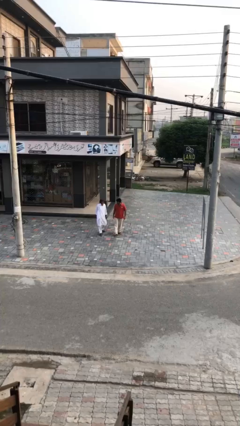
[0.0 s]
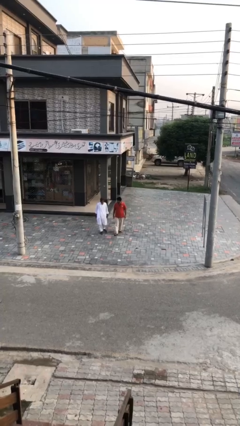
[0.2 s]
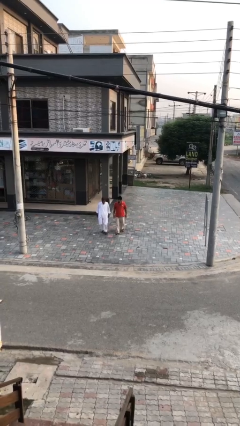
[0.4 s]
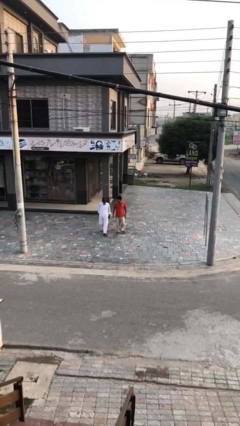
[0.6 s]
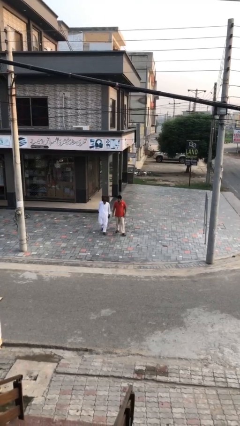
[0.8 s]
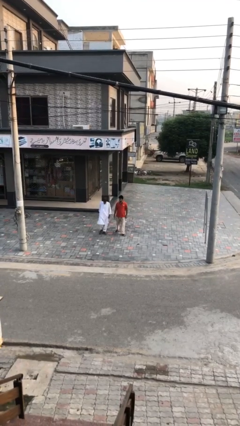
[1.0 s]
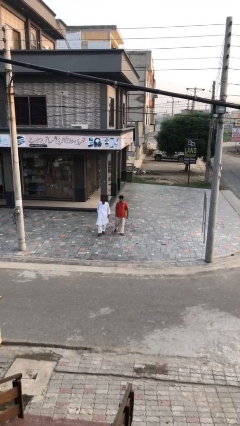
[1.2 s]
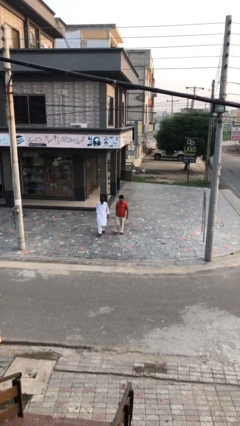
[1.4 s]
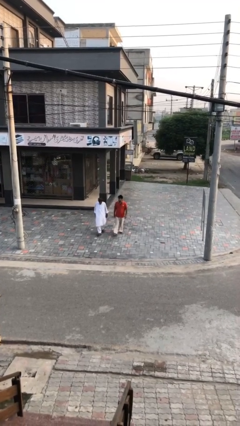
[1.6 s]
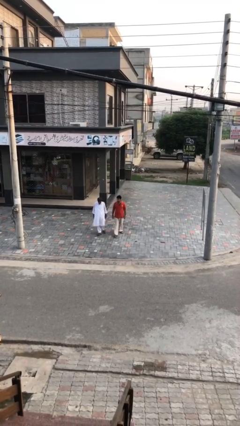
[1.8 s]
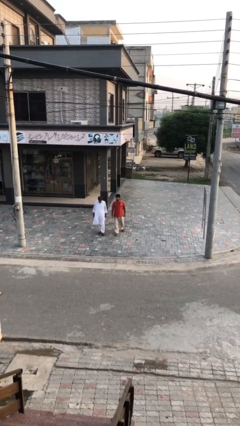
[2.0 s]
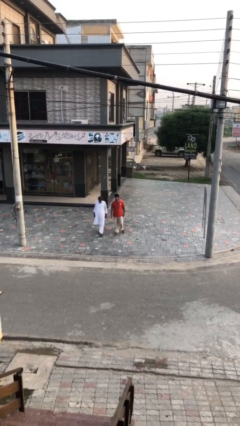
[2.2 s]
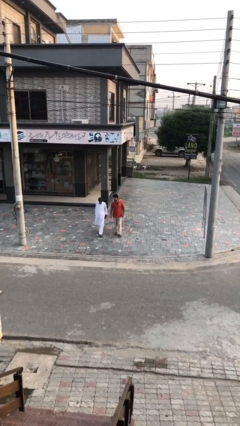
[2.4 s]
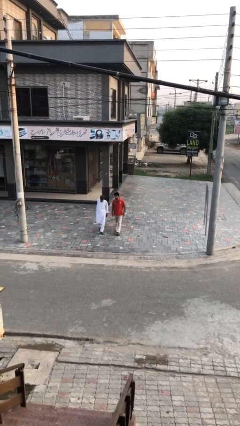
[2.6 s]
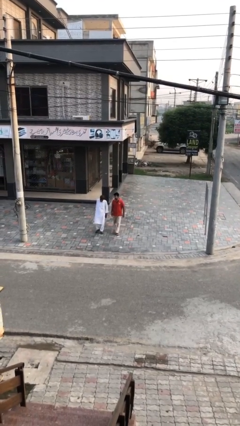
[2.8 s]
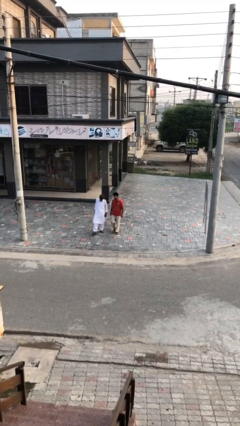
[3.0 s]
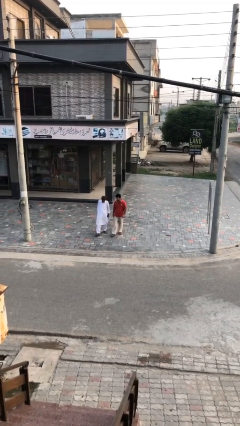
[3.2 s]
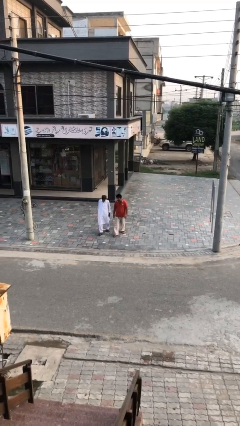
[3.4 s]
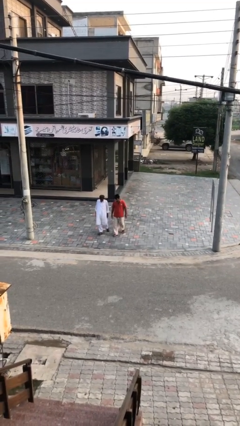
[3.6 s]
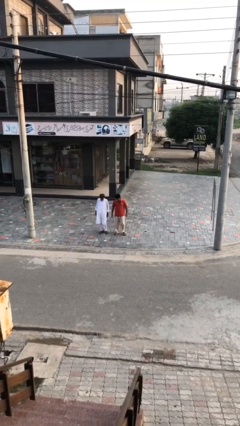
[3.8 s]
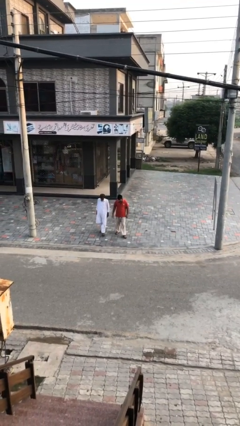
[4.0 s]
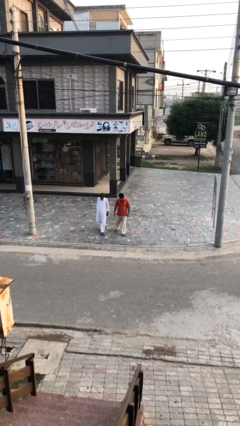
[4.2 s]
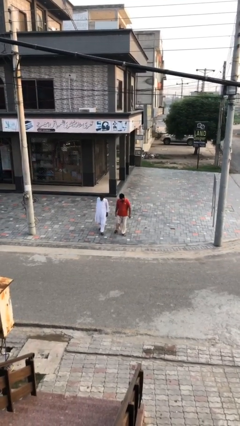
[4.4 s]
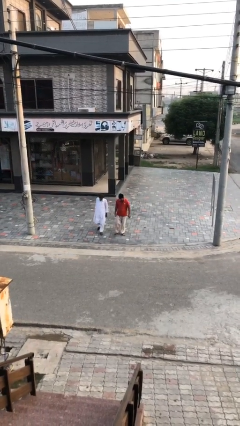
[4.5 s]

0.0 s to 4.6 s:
person talks to person

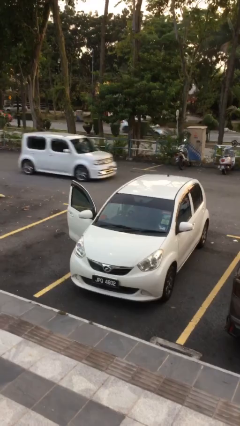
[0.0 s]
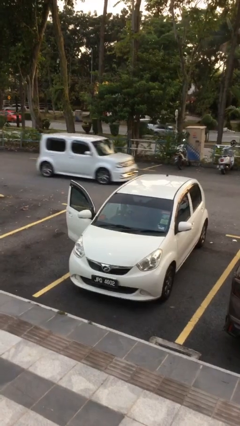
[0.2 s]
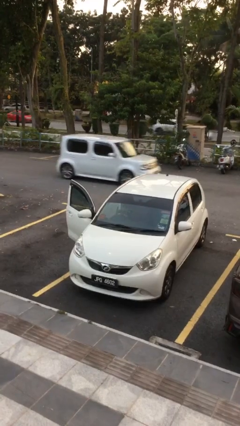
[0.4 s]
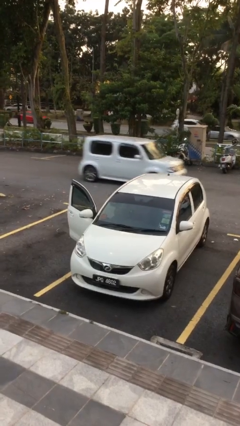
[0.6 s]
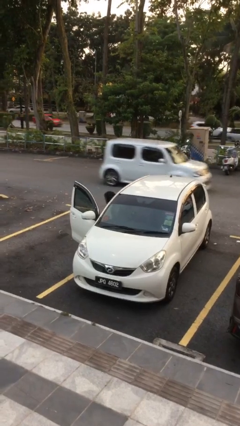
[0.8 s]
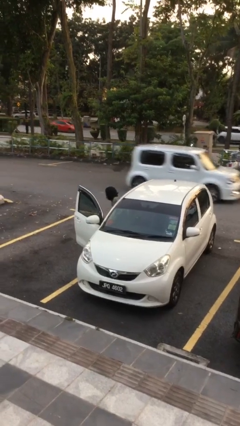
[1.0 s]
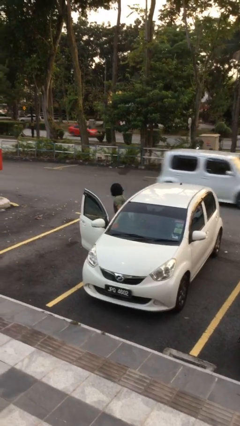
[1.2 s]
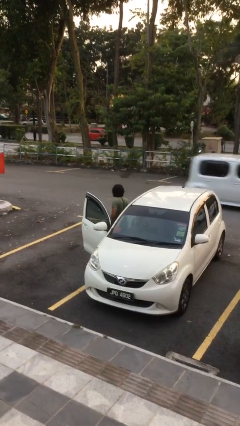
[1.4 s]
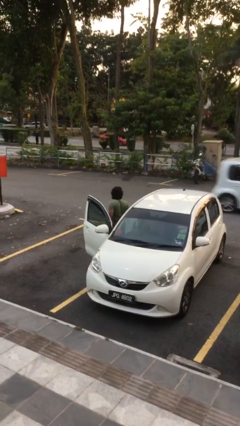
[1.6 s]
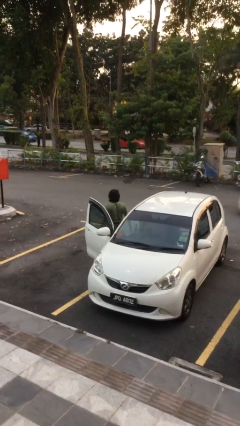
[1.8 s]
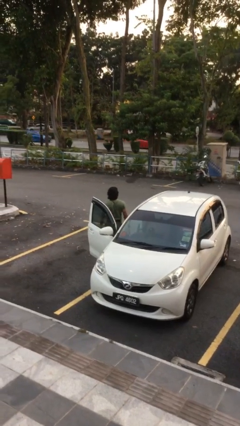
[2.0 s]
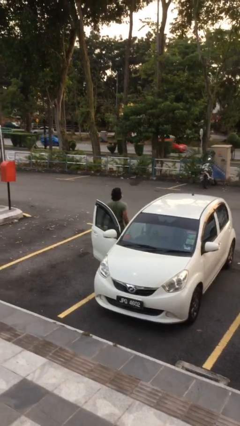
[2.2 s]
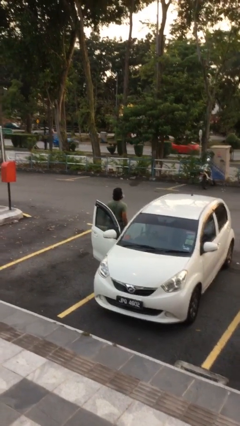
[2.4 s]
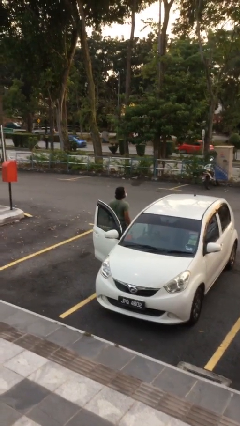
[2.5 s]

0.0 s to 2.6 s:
person exits car

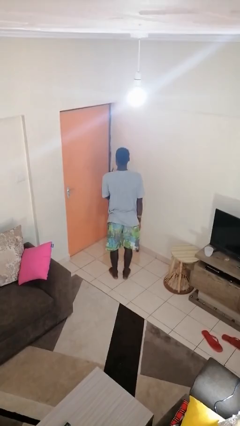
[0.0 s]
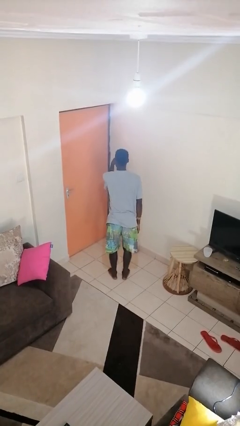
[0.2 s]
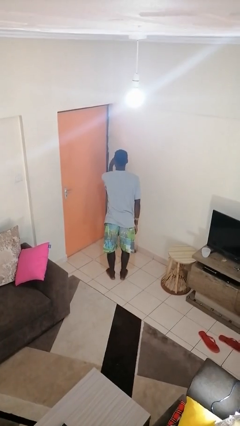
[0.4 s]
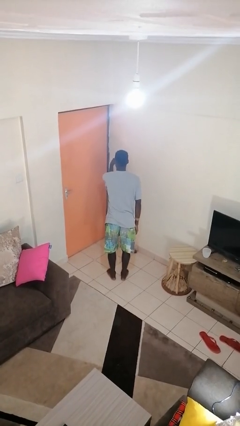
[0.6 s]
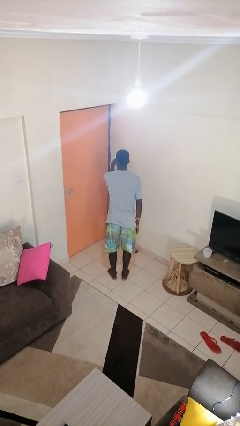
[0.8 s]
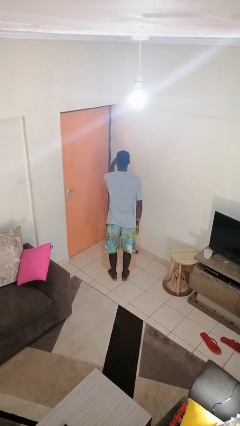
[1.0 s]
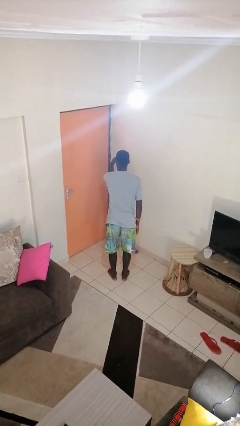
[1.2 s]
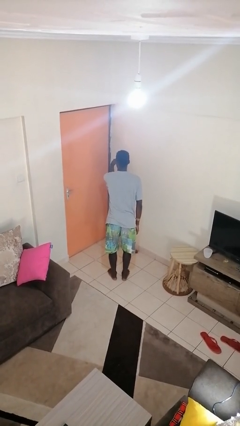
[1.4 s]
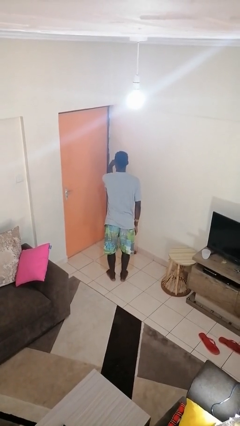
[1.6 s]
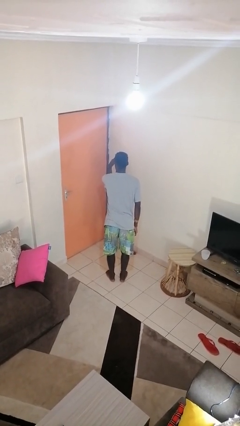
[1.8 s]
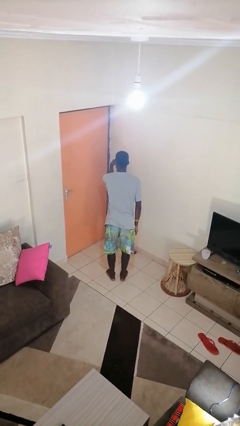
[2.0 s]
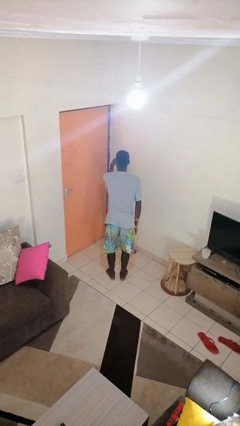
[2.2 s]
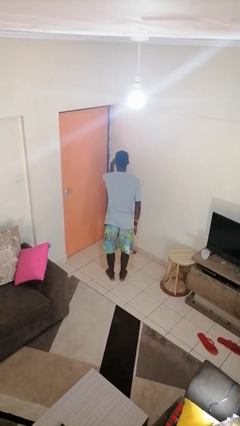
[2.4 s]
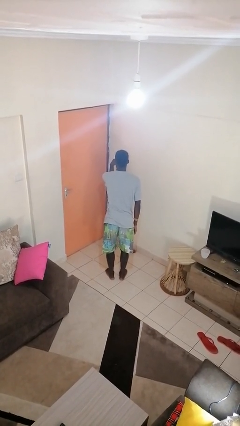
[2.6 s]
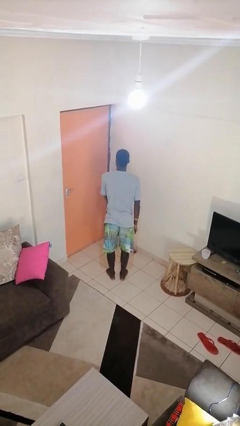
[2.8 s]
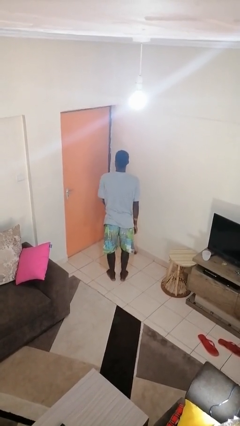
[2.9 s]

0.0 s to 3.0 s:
person gestures watch closely

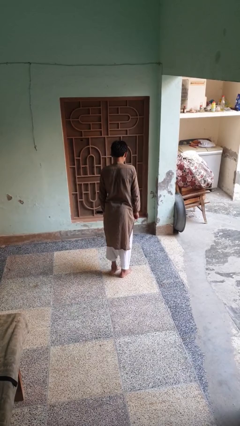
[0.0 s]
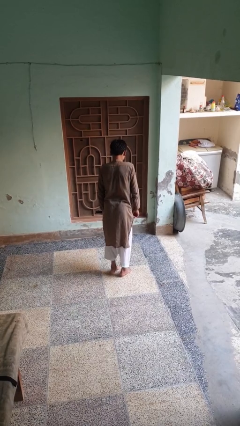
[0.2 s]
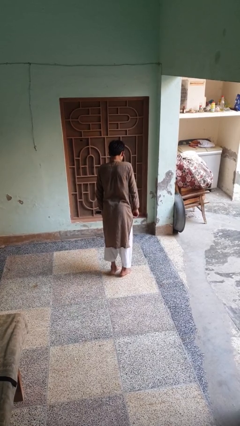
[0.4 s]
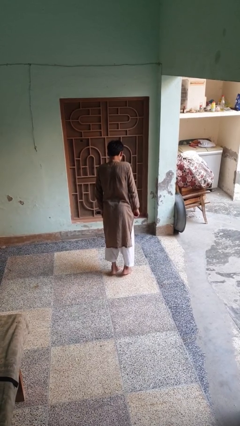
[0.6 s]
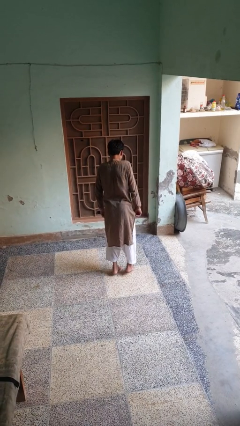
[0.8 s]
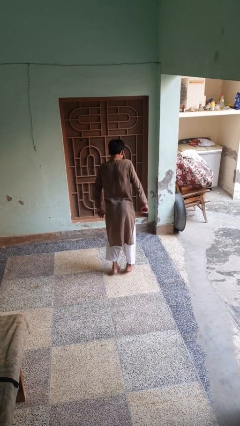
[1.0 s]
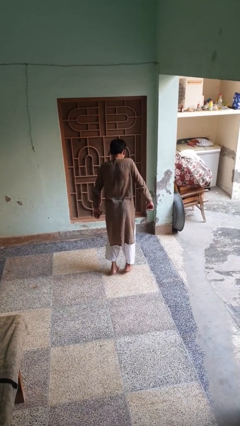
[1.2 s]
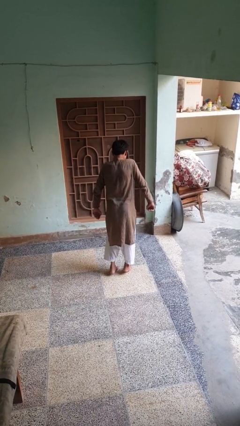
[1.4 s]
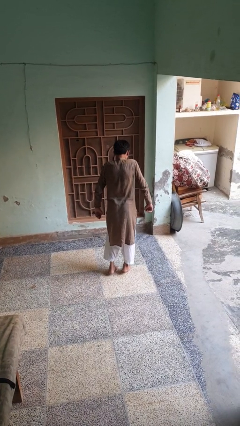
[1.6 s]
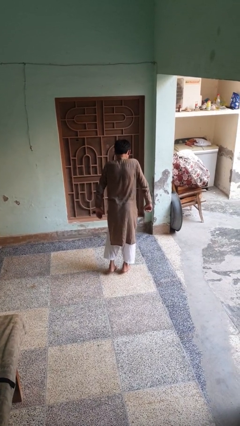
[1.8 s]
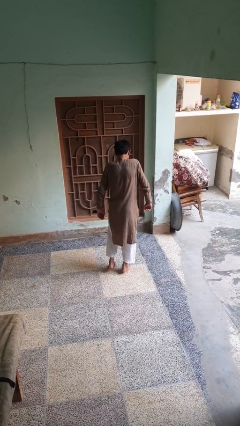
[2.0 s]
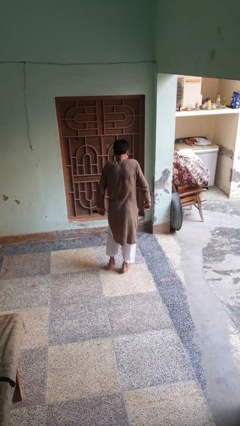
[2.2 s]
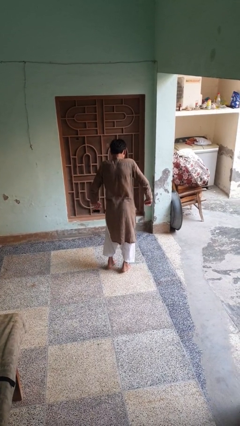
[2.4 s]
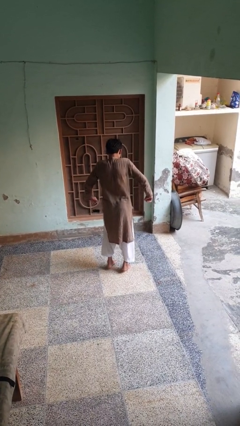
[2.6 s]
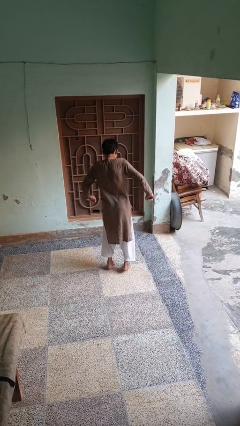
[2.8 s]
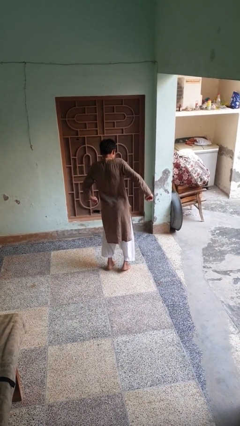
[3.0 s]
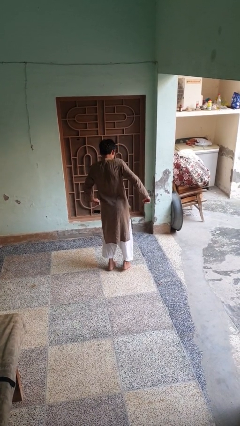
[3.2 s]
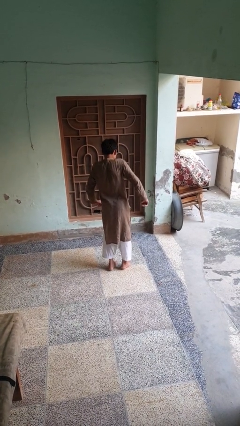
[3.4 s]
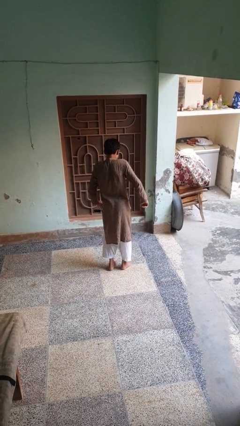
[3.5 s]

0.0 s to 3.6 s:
person walks tiptoe

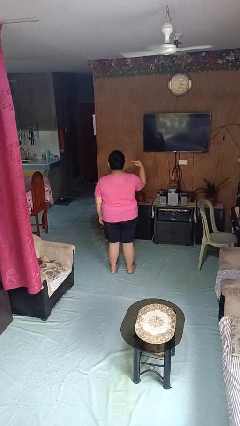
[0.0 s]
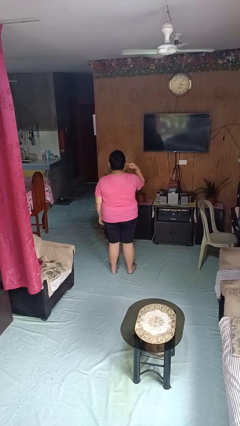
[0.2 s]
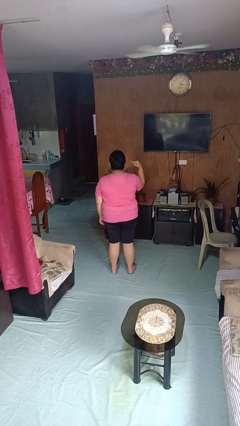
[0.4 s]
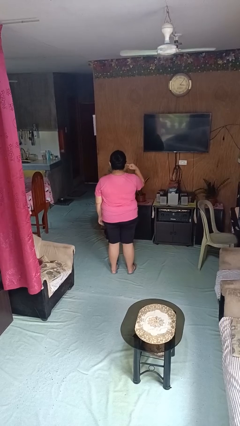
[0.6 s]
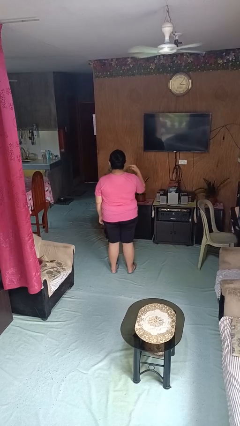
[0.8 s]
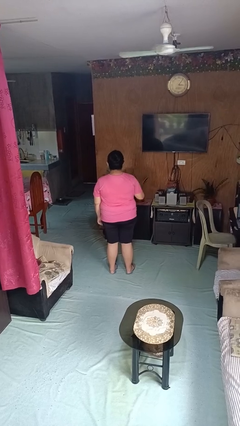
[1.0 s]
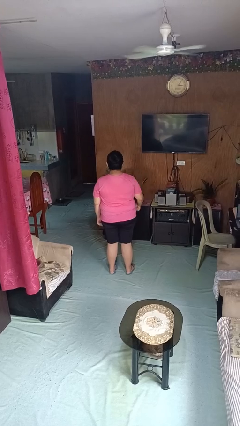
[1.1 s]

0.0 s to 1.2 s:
person gestures listen closely

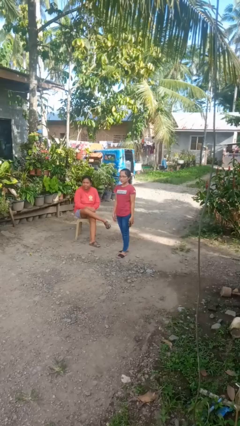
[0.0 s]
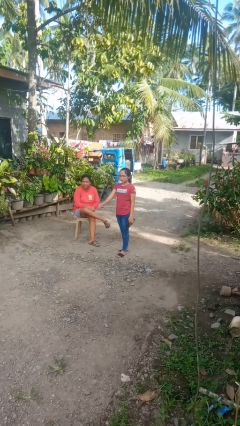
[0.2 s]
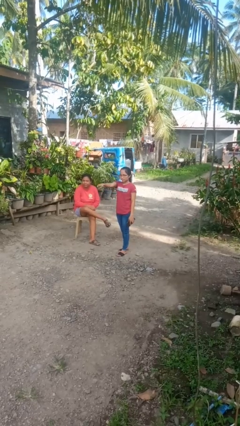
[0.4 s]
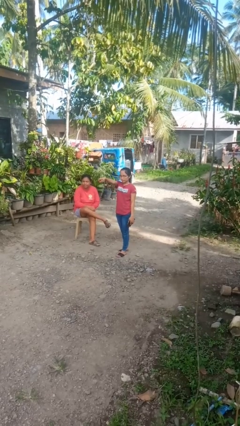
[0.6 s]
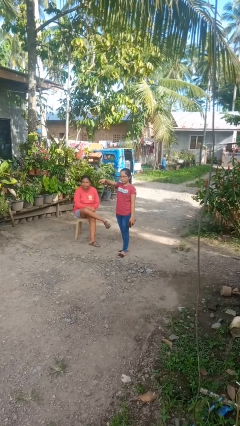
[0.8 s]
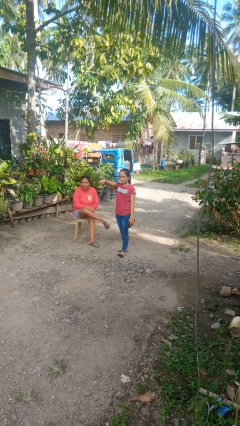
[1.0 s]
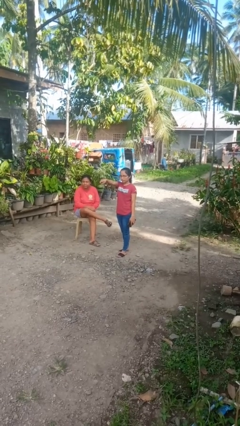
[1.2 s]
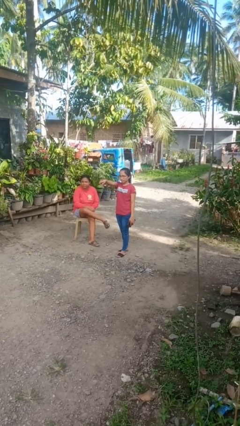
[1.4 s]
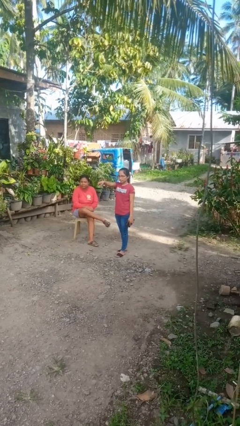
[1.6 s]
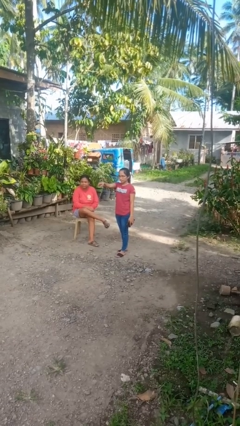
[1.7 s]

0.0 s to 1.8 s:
person points at person

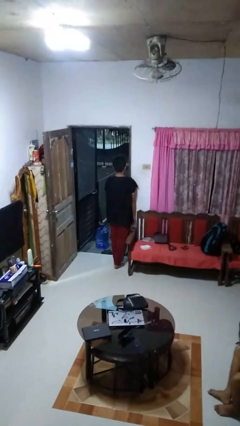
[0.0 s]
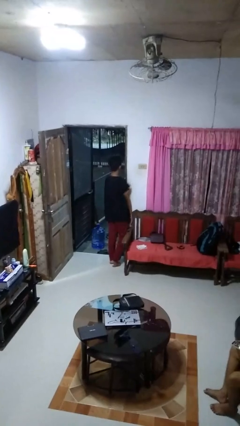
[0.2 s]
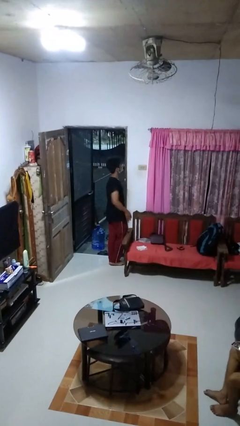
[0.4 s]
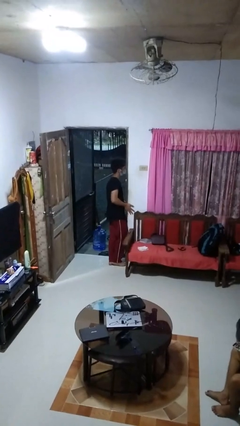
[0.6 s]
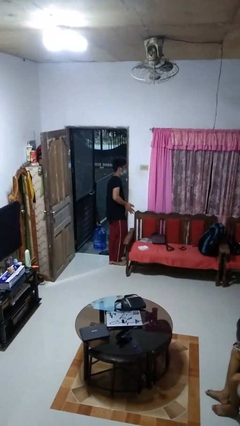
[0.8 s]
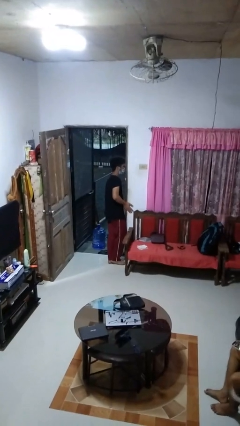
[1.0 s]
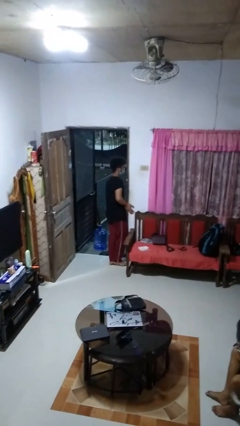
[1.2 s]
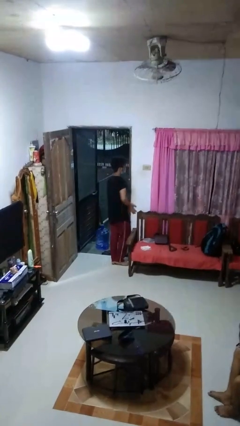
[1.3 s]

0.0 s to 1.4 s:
person bumps into wall
